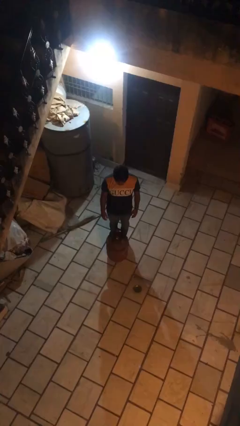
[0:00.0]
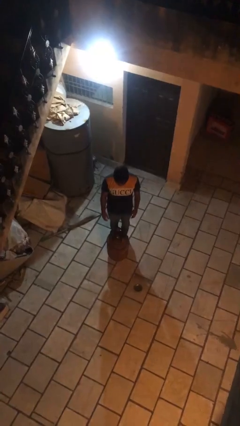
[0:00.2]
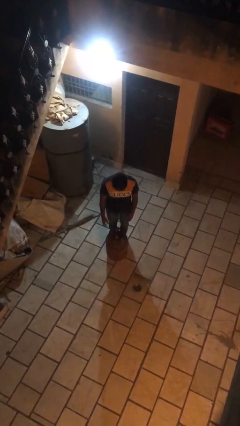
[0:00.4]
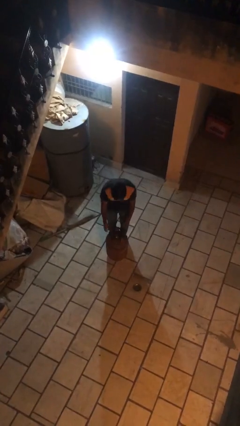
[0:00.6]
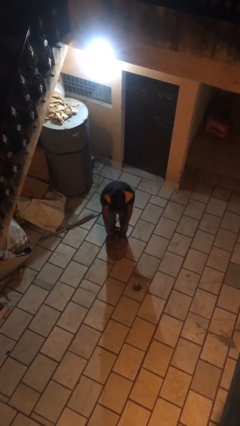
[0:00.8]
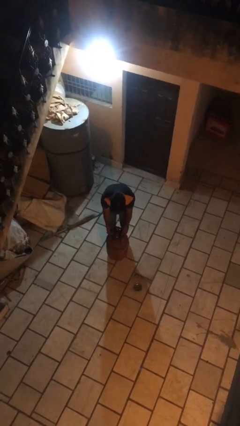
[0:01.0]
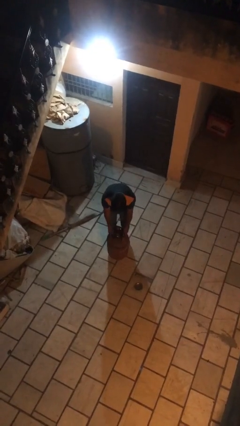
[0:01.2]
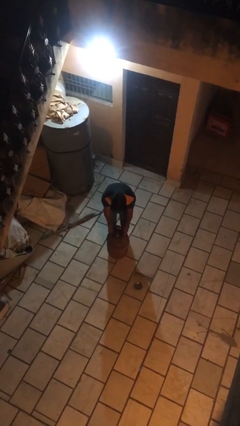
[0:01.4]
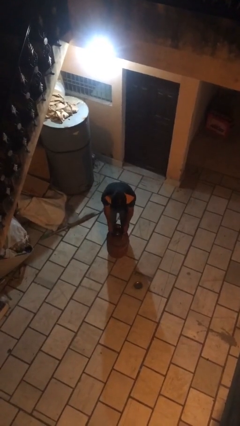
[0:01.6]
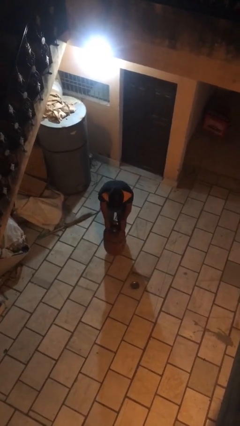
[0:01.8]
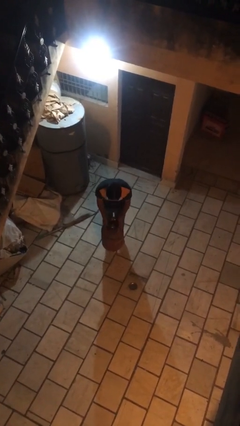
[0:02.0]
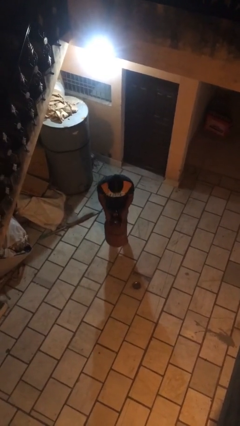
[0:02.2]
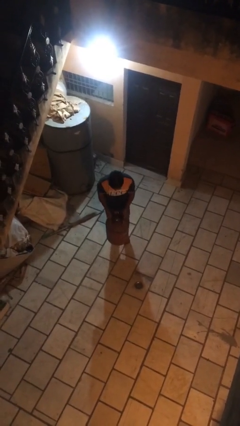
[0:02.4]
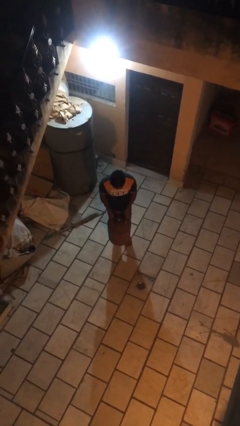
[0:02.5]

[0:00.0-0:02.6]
person picks up object from floor

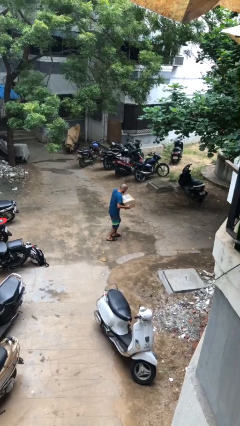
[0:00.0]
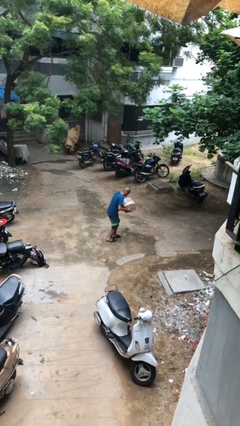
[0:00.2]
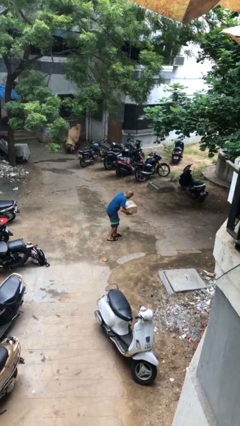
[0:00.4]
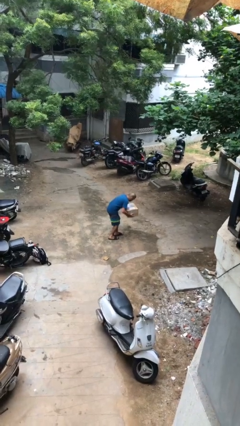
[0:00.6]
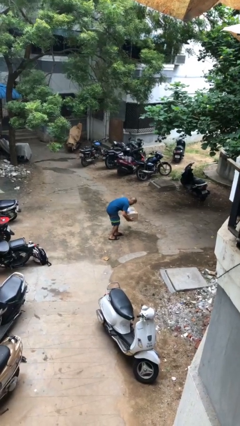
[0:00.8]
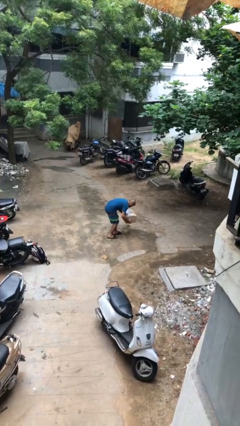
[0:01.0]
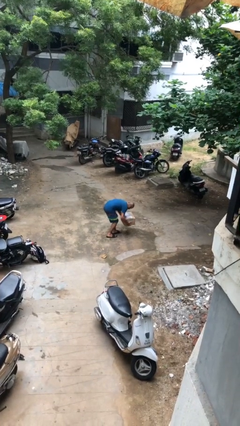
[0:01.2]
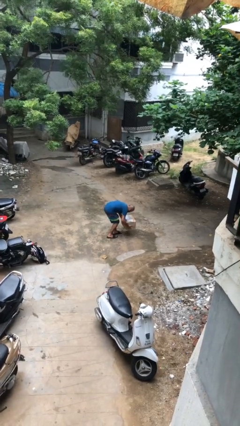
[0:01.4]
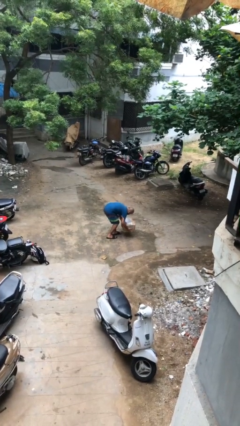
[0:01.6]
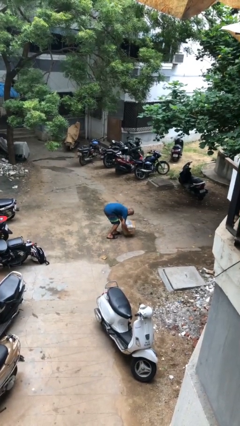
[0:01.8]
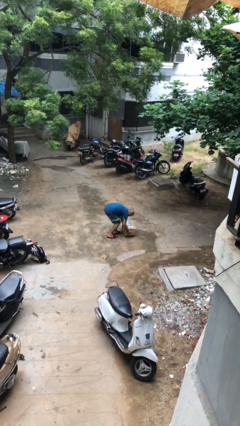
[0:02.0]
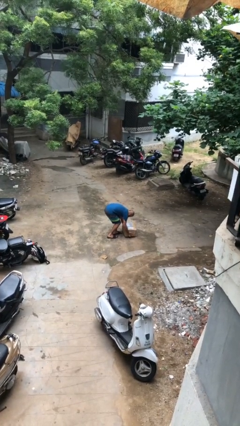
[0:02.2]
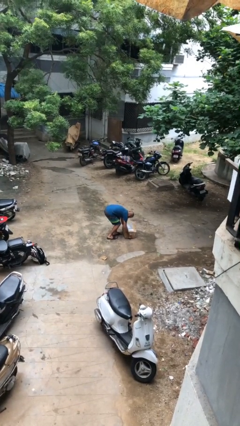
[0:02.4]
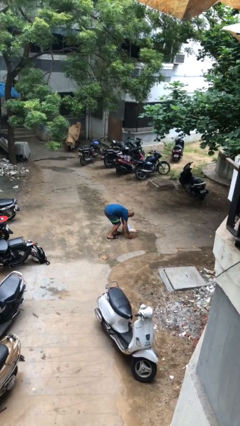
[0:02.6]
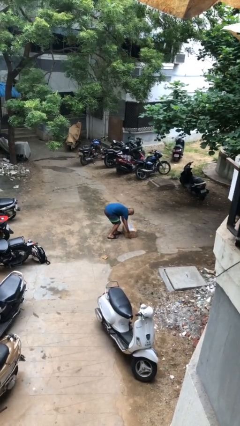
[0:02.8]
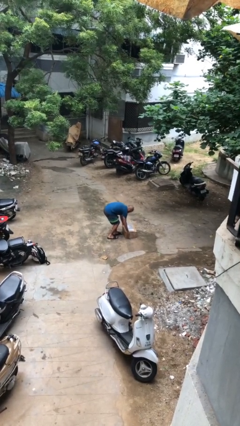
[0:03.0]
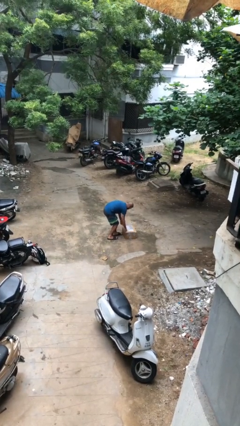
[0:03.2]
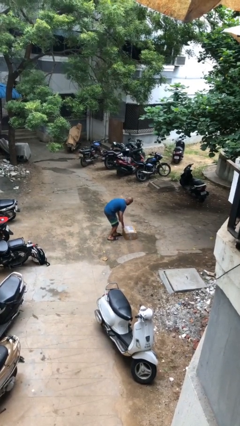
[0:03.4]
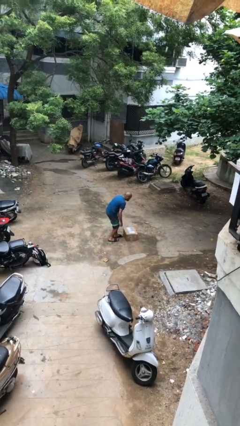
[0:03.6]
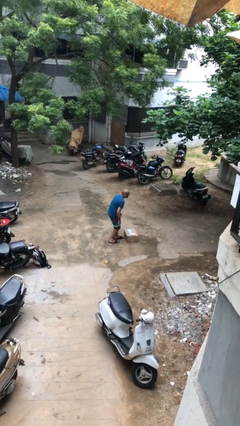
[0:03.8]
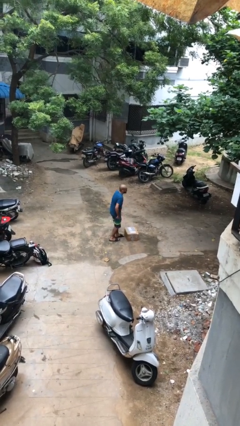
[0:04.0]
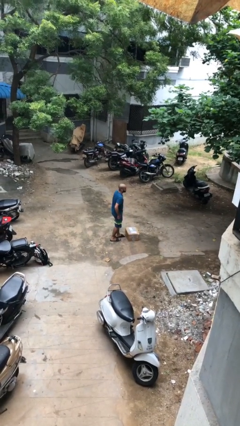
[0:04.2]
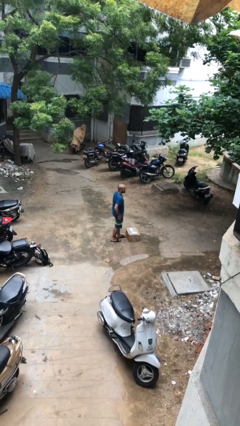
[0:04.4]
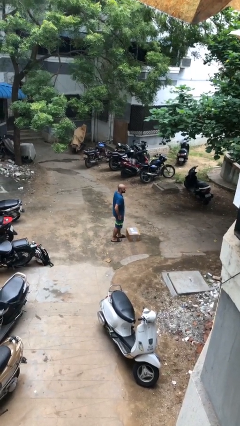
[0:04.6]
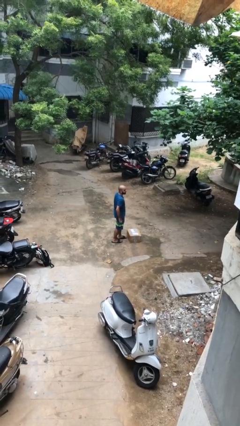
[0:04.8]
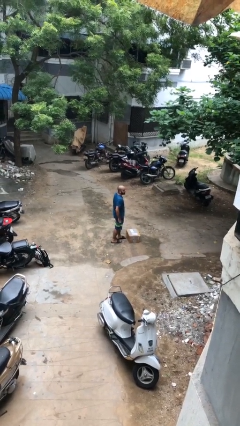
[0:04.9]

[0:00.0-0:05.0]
person puts down object on floor

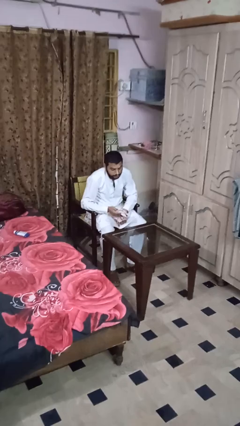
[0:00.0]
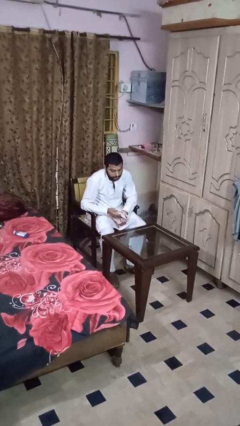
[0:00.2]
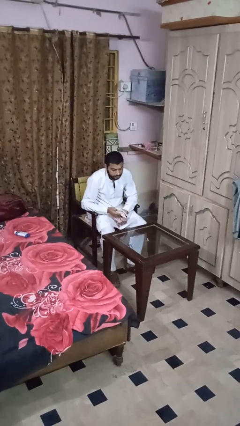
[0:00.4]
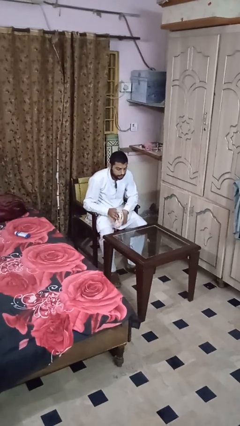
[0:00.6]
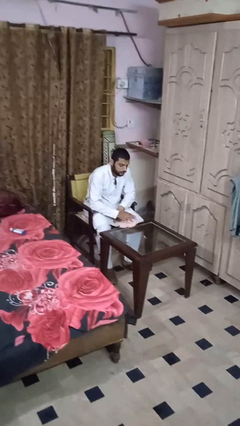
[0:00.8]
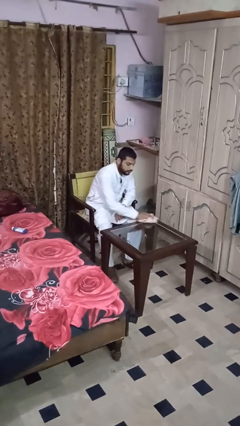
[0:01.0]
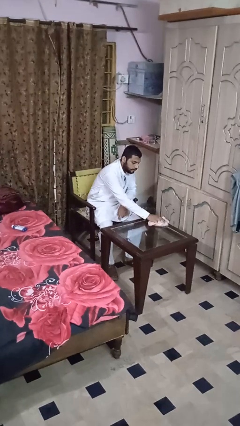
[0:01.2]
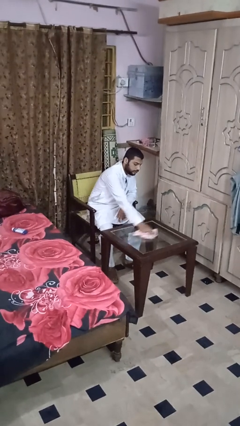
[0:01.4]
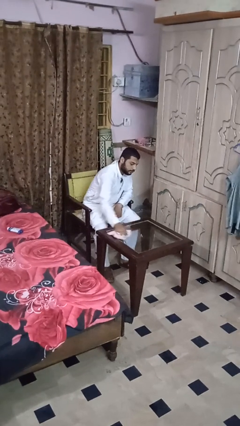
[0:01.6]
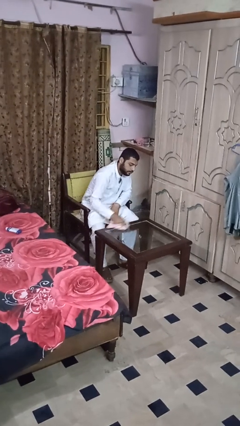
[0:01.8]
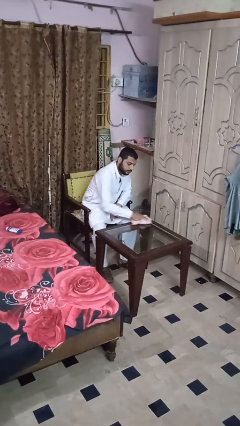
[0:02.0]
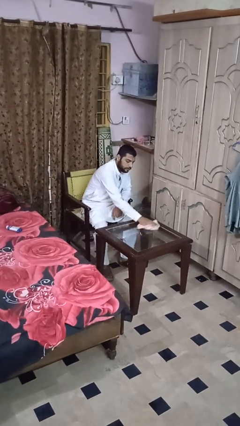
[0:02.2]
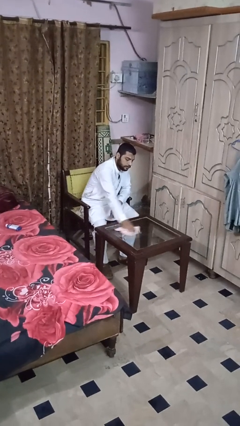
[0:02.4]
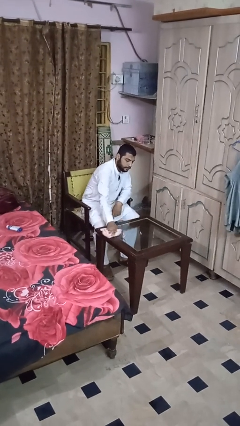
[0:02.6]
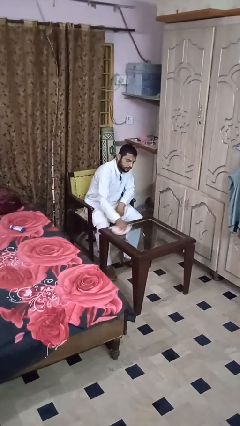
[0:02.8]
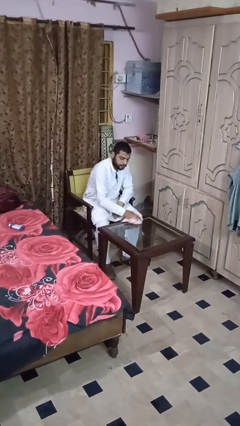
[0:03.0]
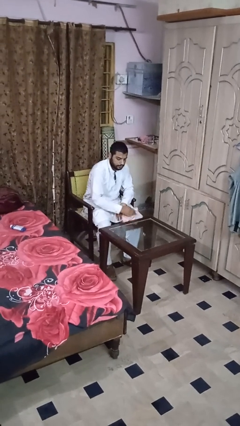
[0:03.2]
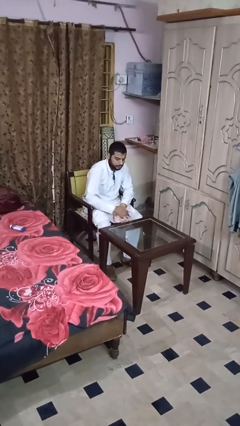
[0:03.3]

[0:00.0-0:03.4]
person cleans table with rag

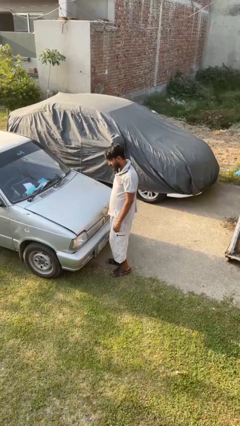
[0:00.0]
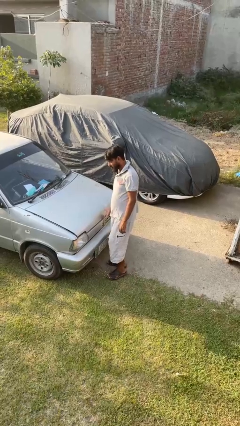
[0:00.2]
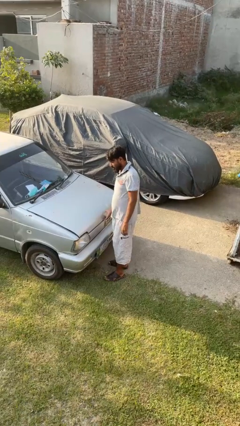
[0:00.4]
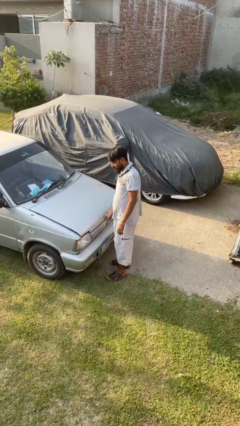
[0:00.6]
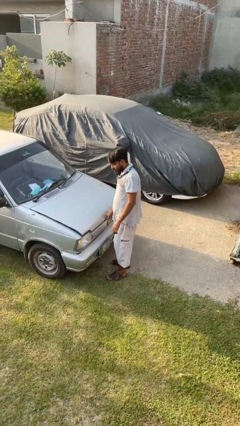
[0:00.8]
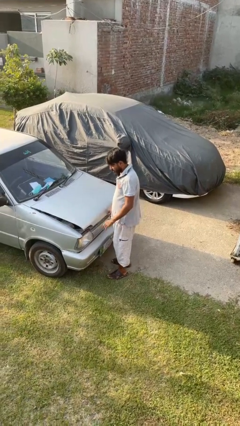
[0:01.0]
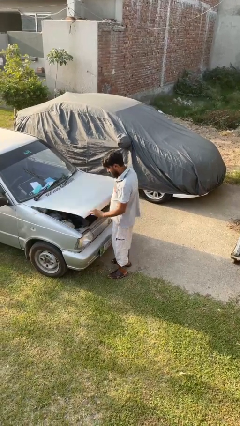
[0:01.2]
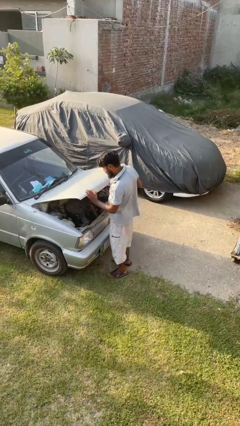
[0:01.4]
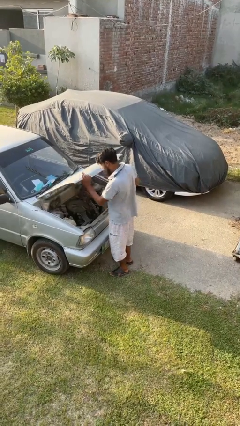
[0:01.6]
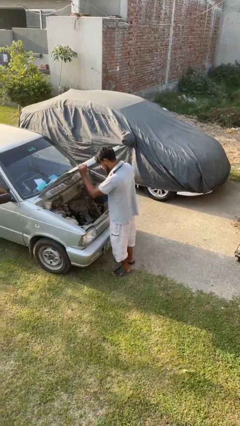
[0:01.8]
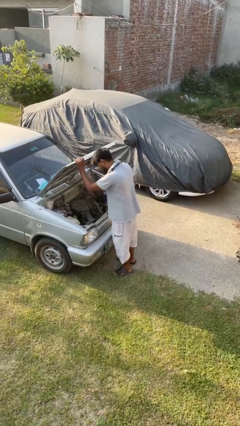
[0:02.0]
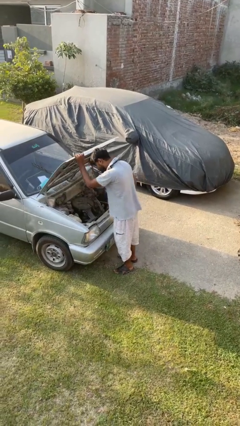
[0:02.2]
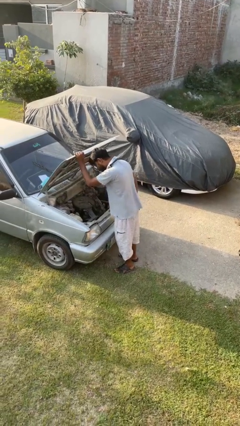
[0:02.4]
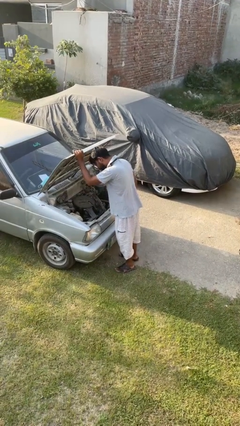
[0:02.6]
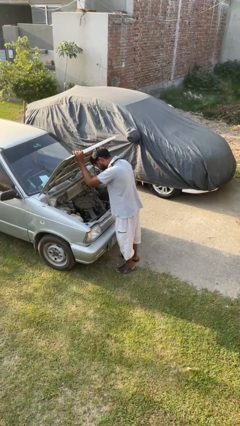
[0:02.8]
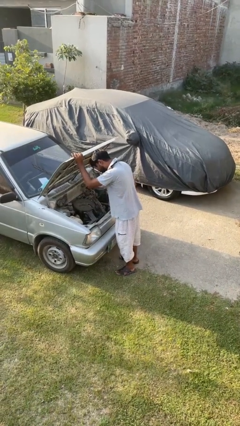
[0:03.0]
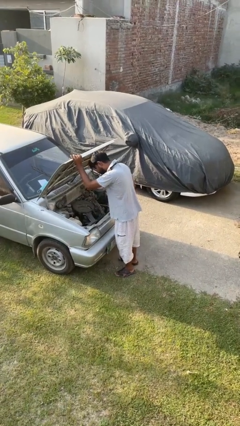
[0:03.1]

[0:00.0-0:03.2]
person opens car hood

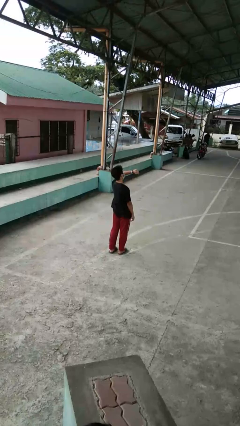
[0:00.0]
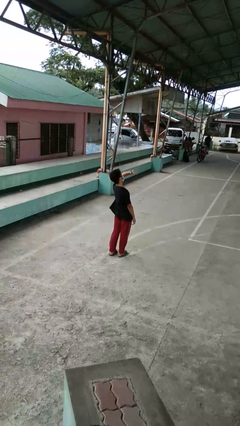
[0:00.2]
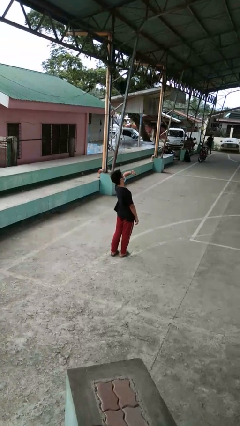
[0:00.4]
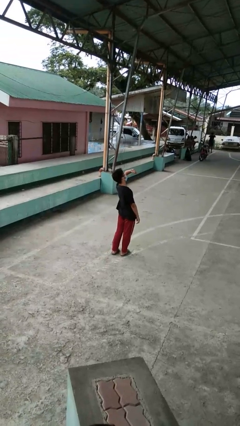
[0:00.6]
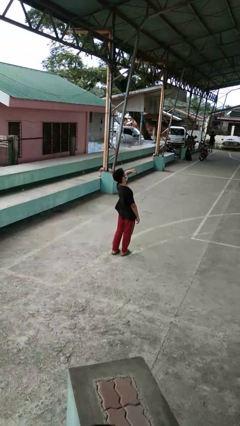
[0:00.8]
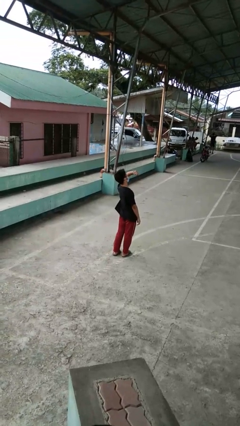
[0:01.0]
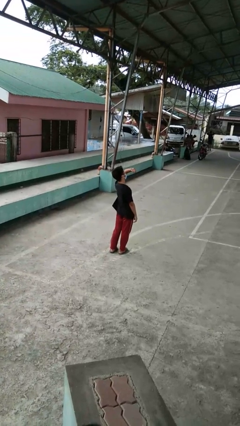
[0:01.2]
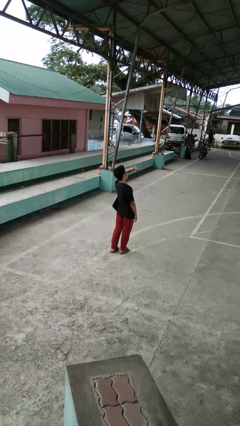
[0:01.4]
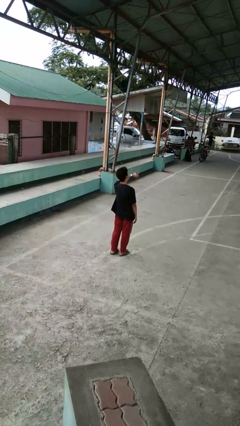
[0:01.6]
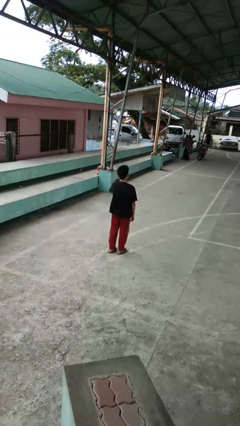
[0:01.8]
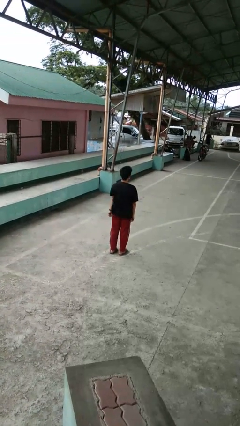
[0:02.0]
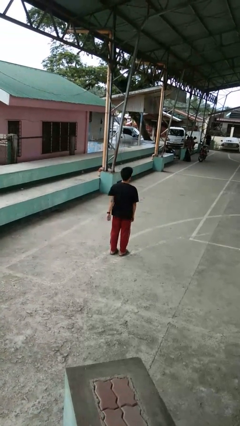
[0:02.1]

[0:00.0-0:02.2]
person looks at wristwatch

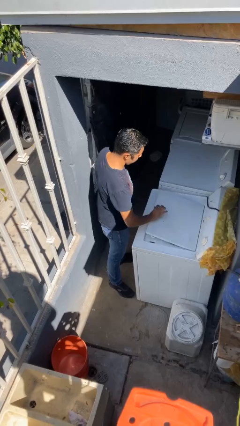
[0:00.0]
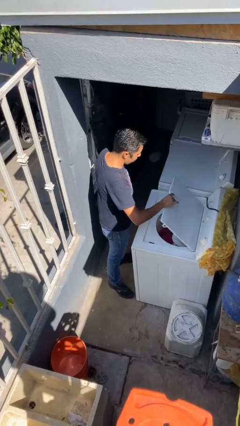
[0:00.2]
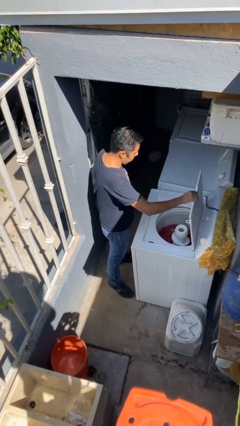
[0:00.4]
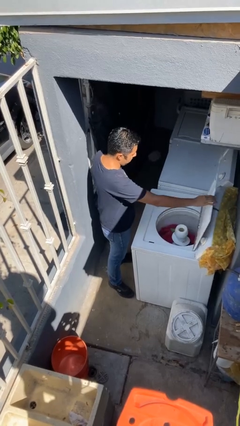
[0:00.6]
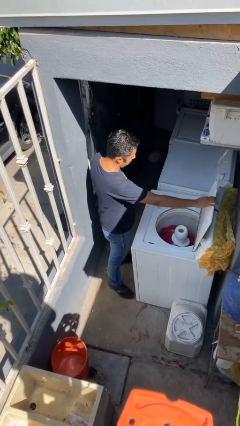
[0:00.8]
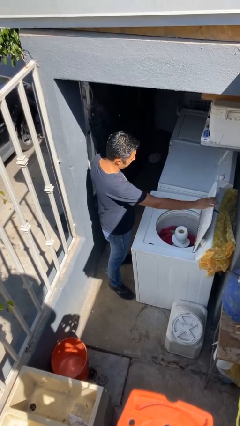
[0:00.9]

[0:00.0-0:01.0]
person opens clothes washer
